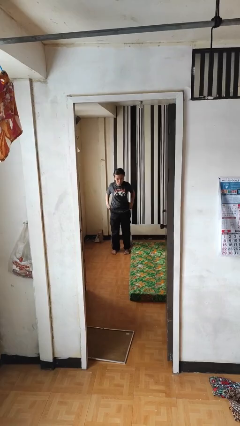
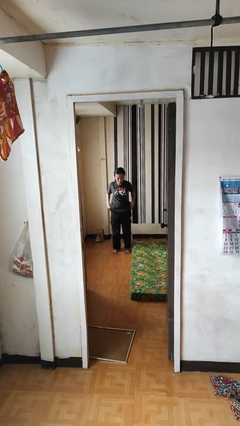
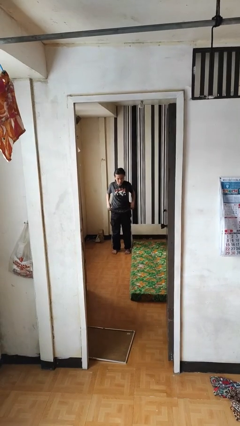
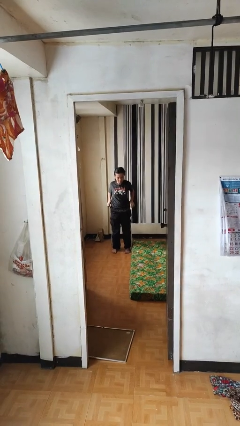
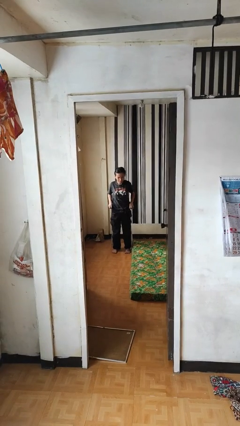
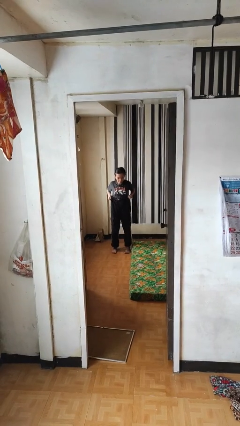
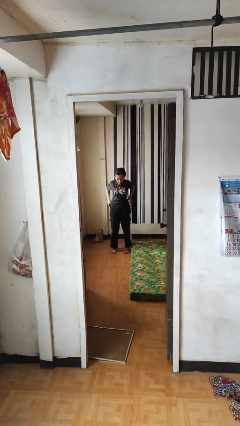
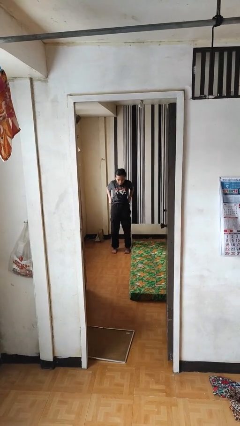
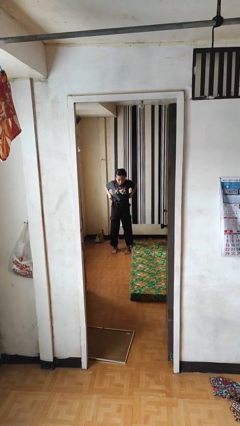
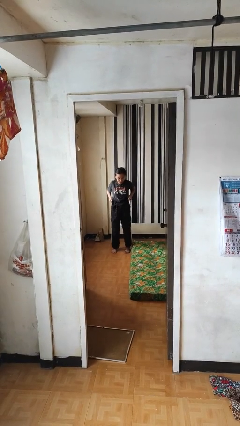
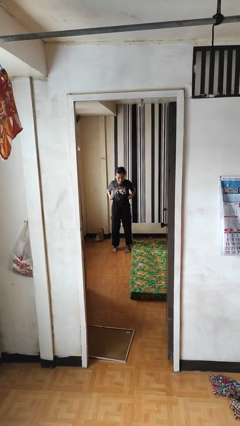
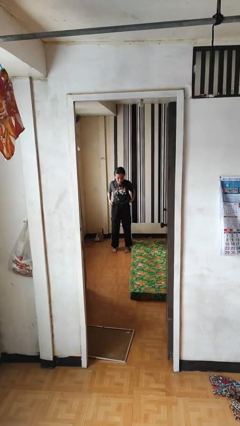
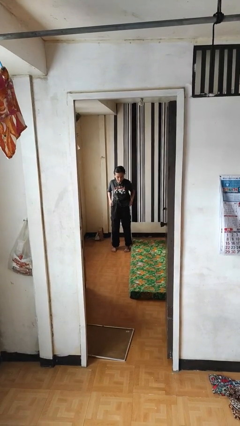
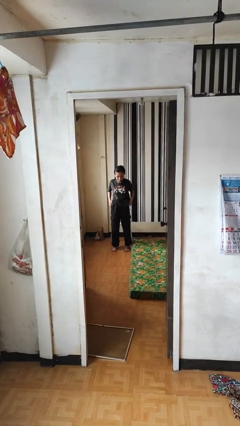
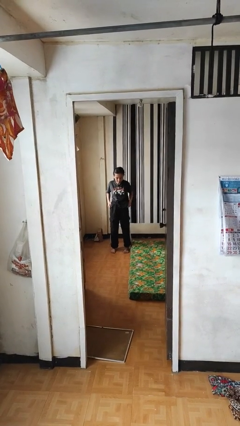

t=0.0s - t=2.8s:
person hikes up pants

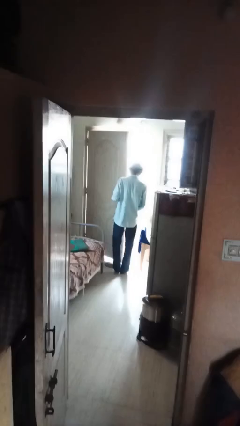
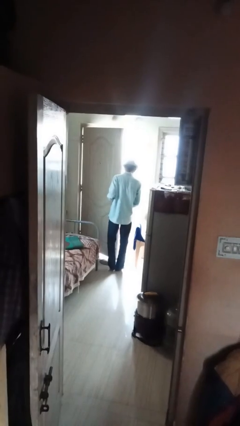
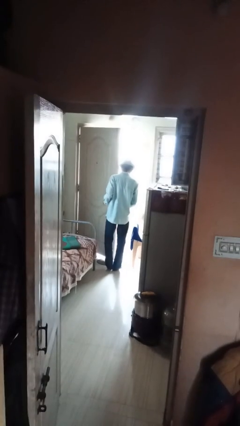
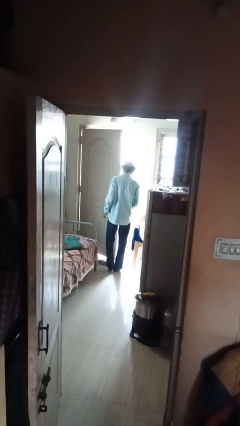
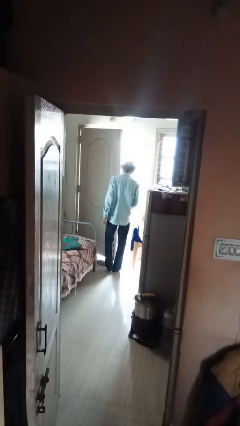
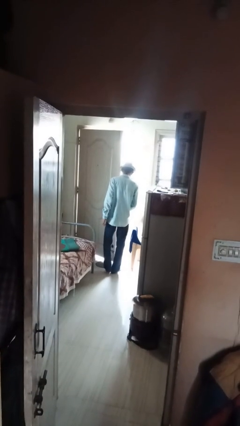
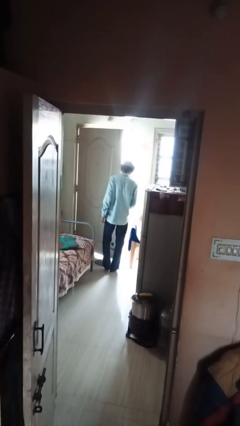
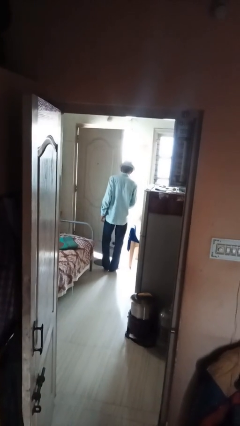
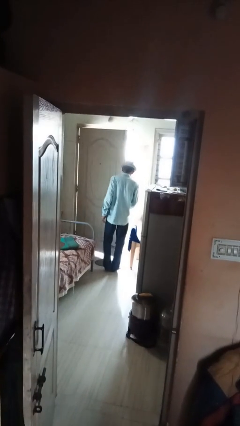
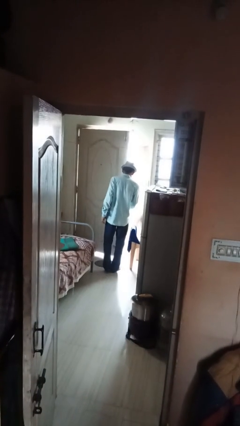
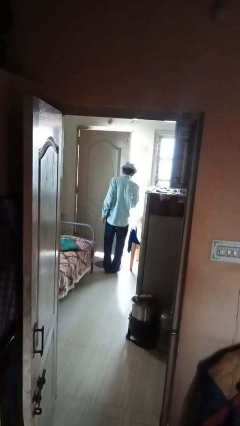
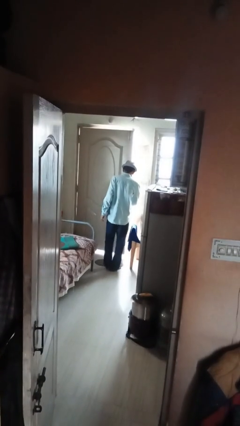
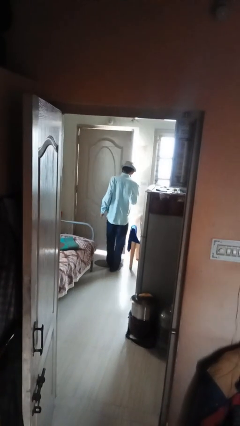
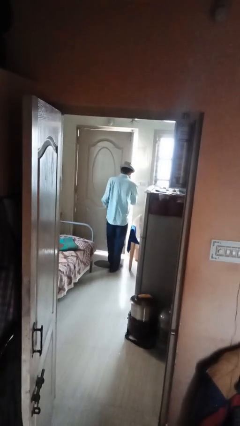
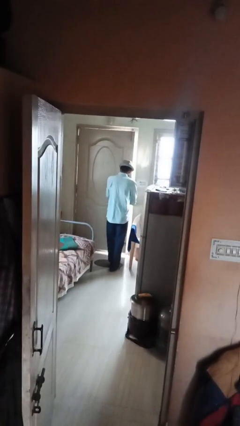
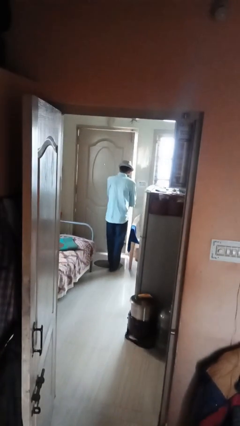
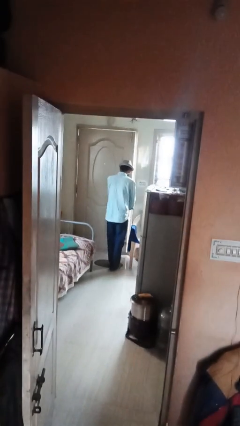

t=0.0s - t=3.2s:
person opens facility door

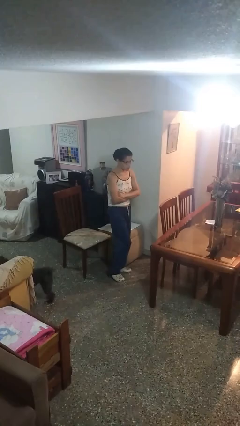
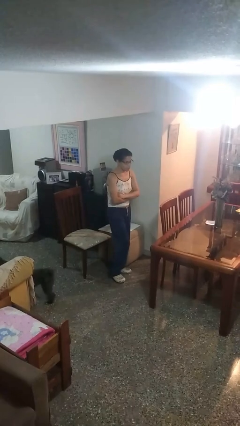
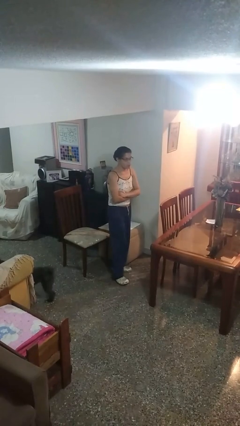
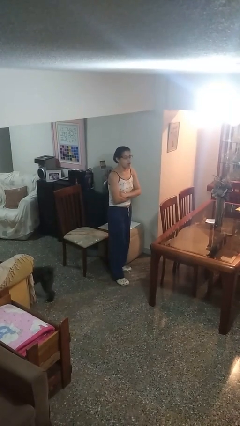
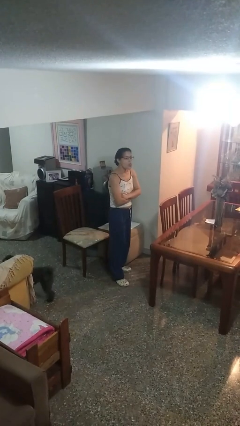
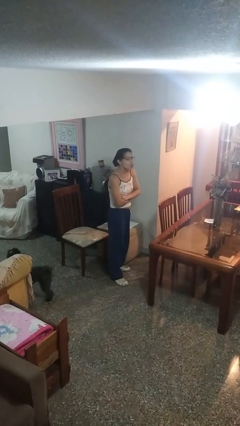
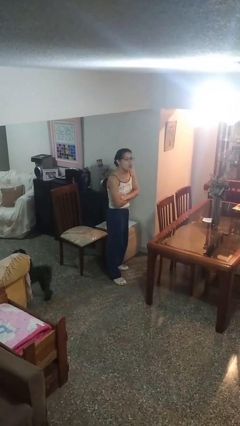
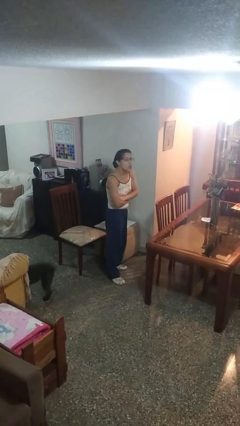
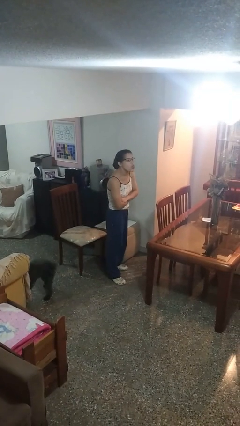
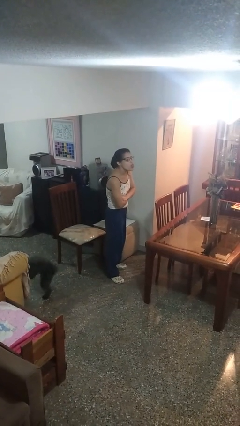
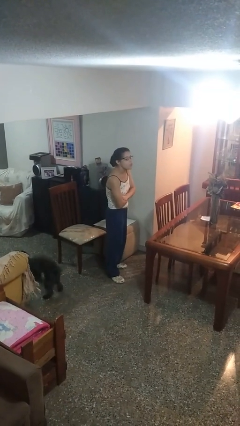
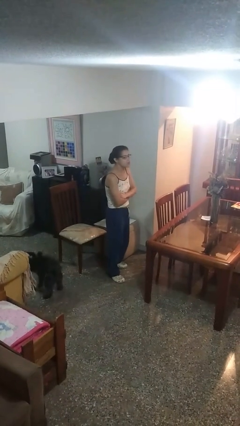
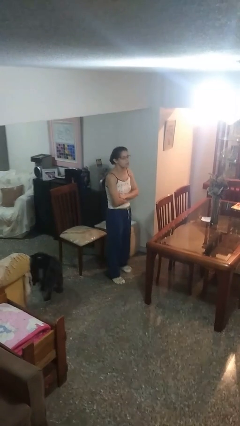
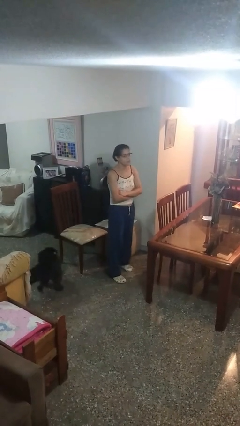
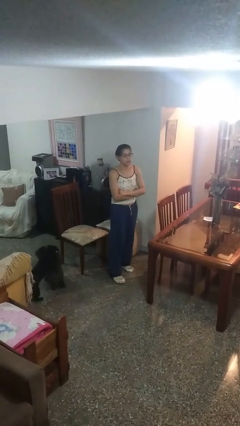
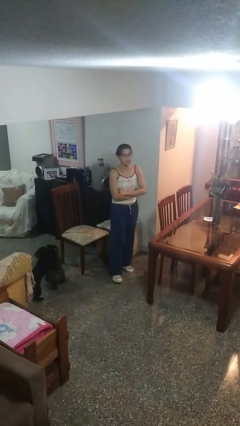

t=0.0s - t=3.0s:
person sticks out tongue

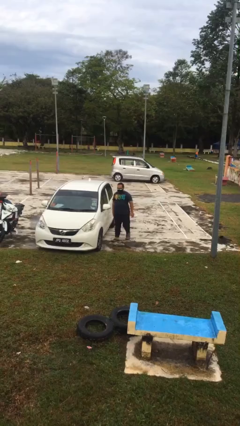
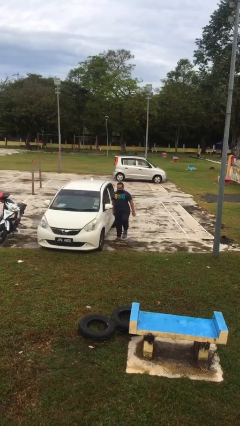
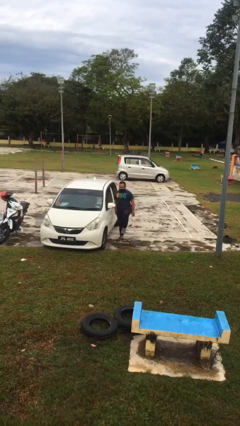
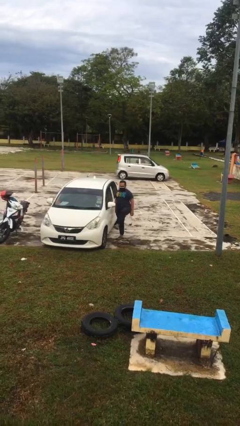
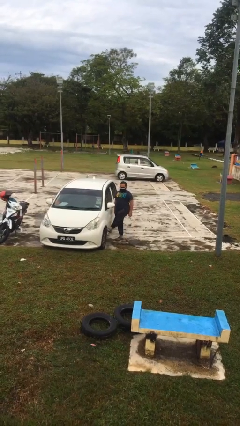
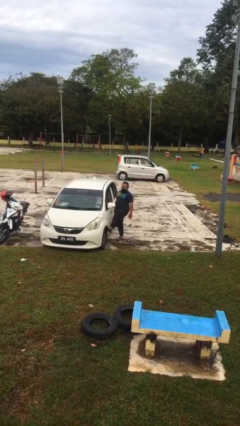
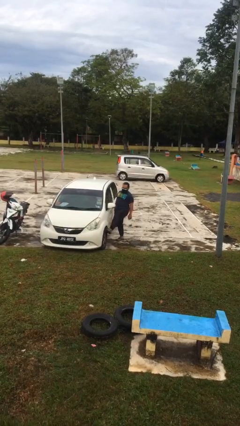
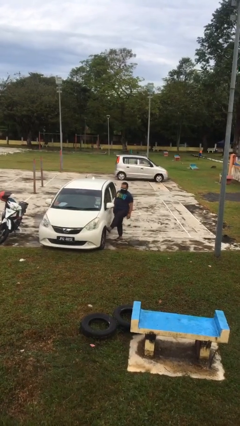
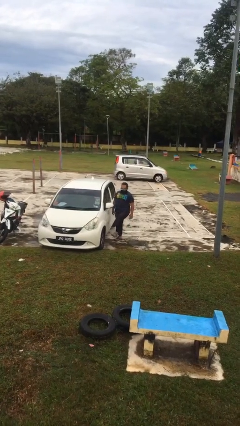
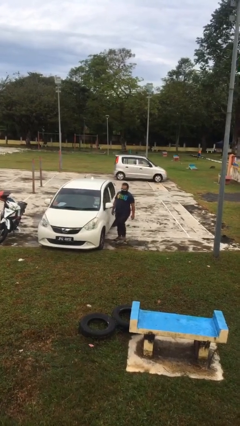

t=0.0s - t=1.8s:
person kicks car tires

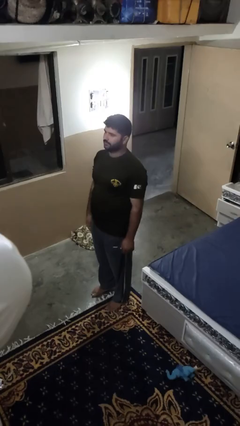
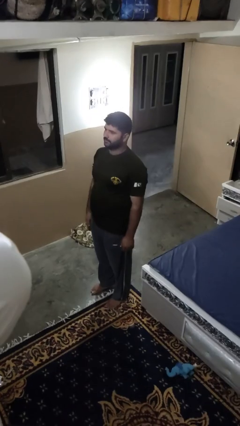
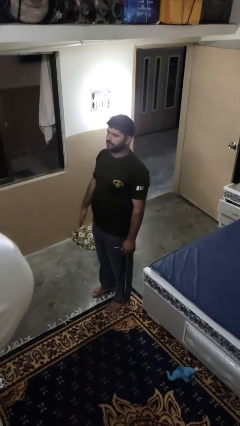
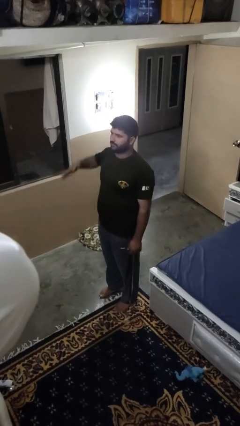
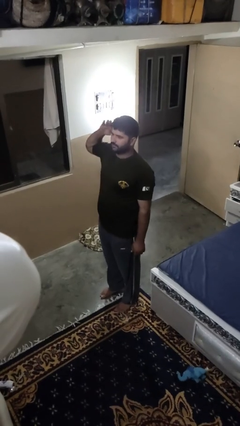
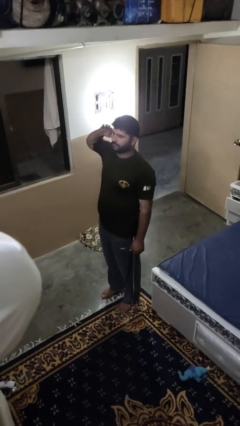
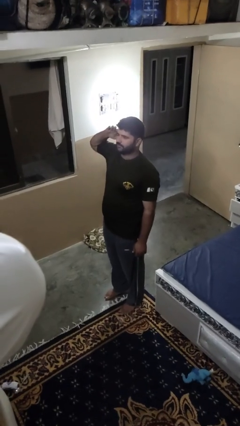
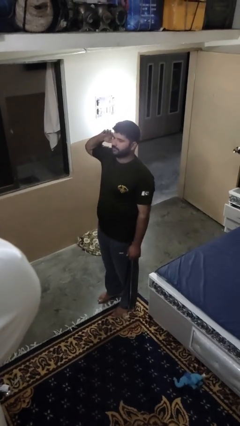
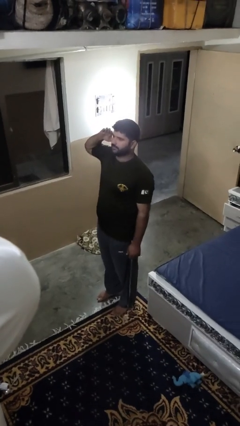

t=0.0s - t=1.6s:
person salutes

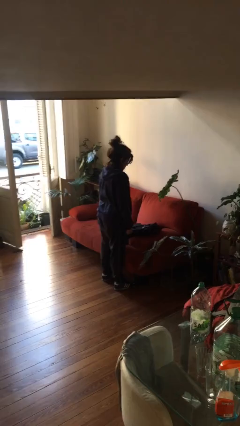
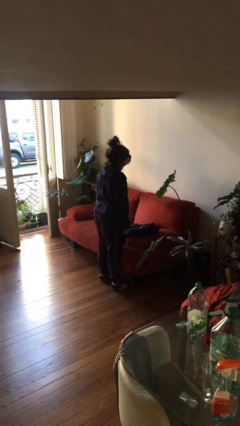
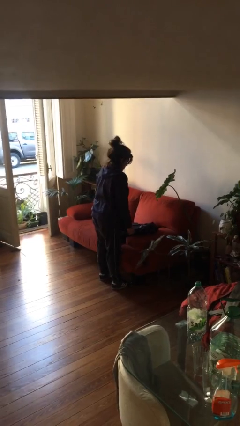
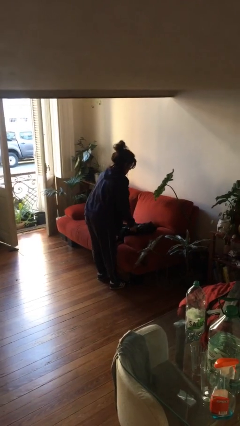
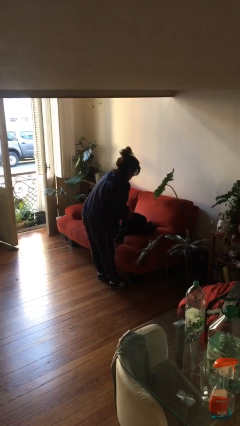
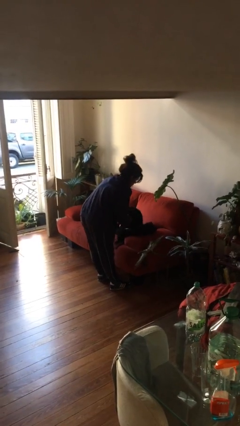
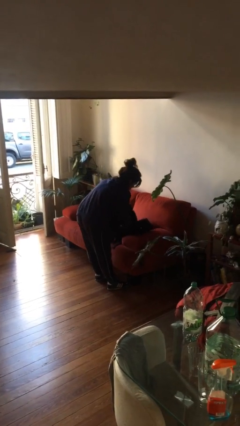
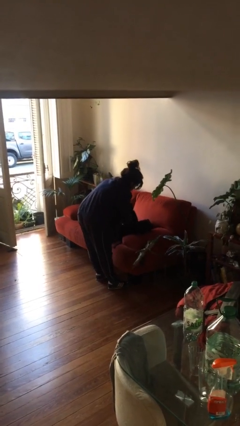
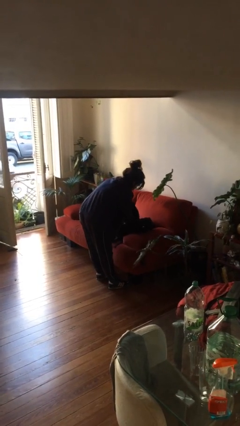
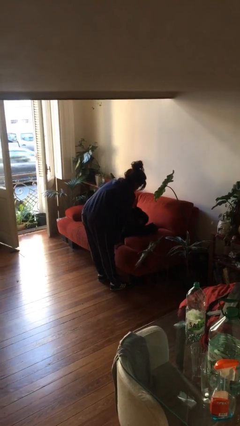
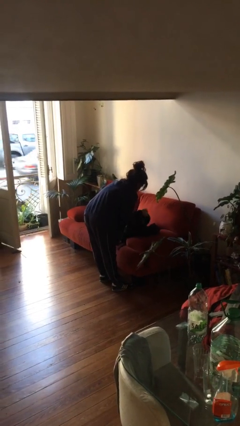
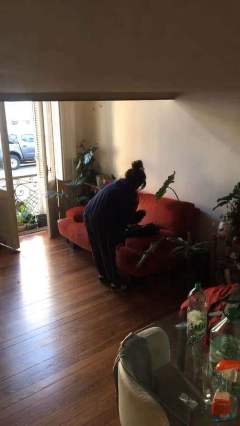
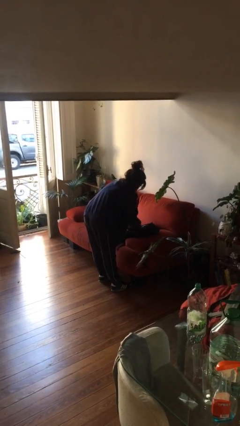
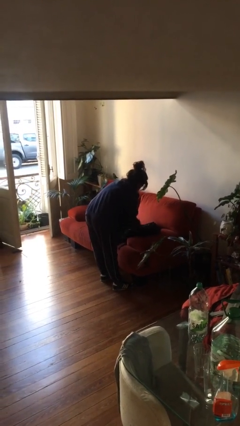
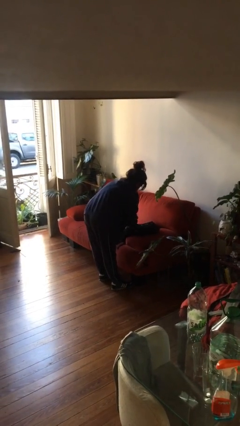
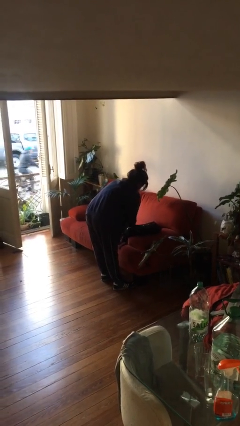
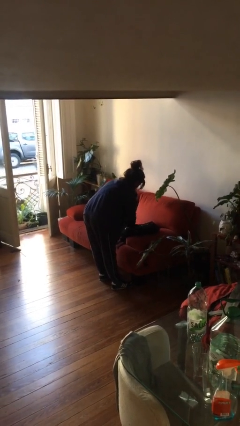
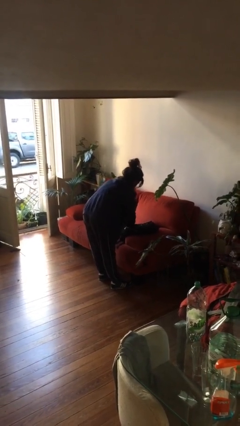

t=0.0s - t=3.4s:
person searches in backpack

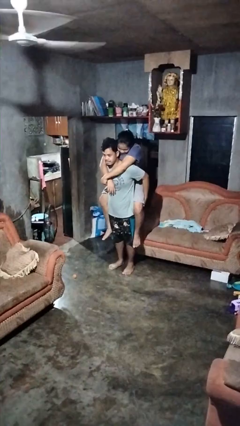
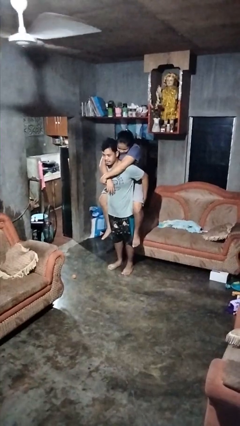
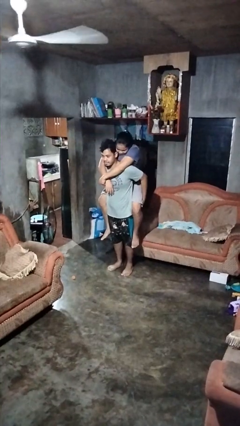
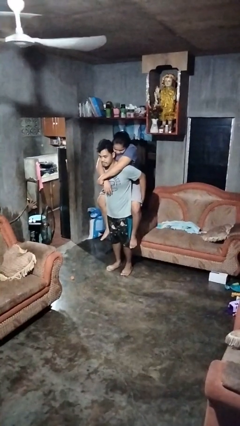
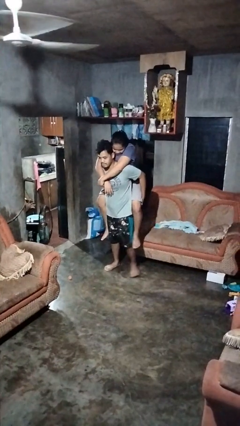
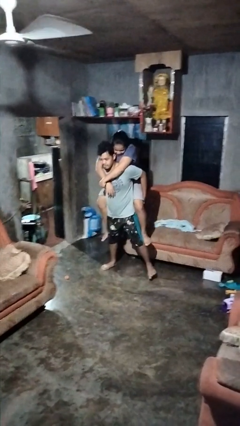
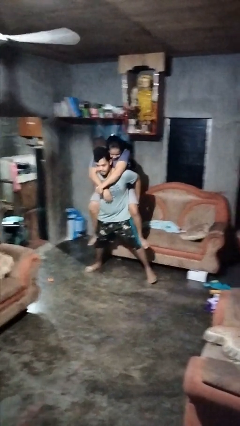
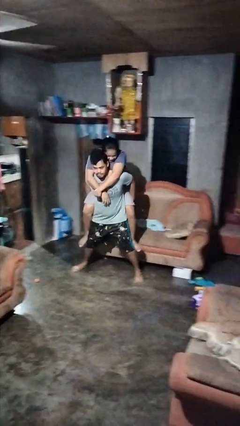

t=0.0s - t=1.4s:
person carries person on back
